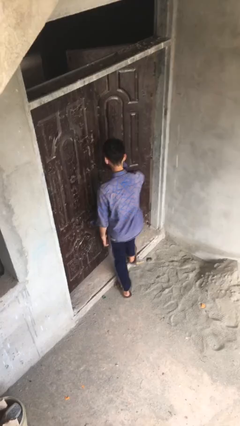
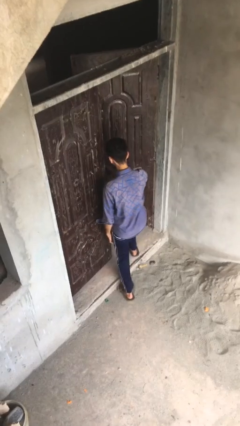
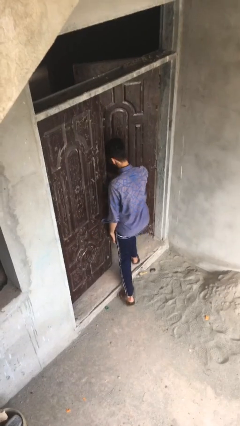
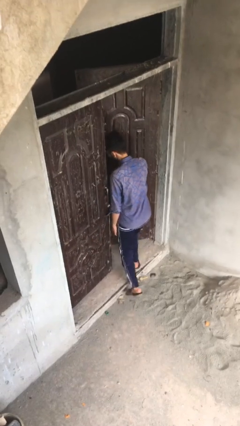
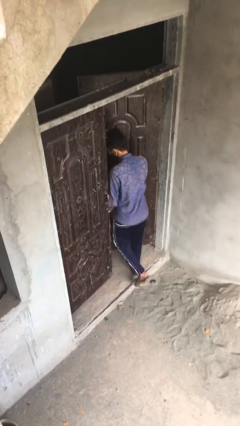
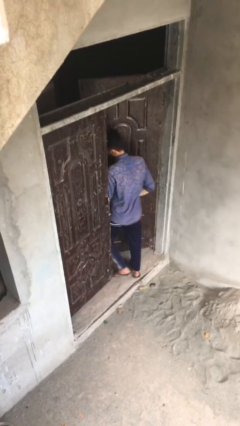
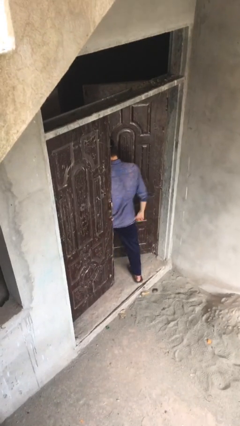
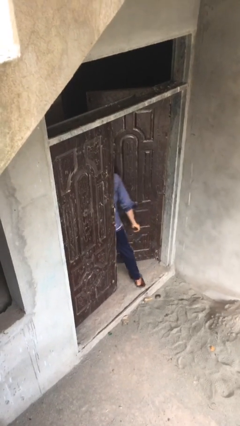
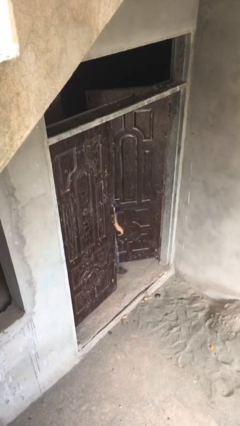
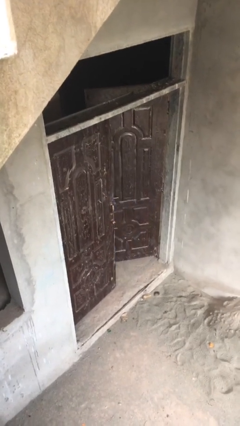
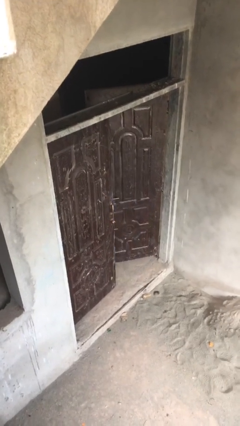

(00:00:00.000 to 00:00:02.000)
person exits scene through structure

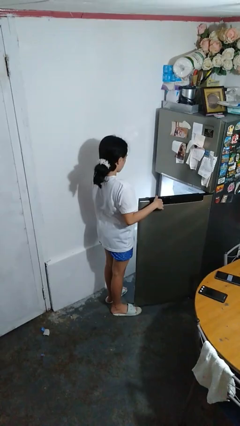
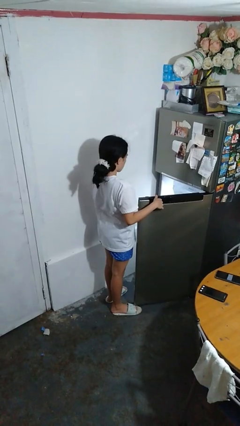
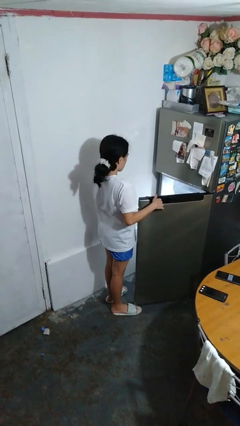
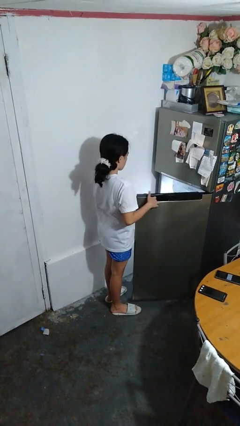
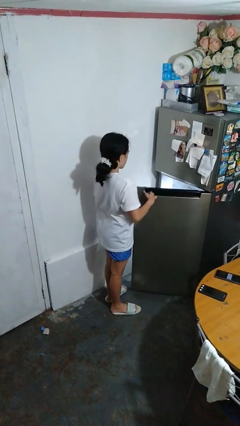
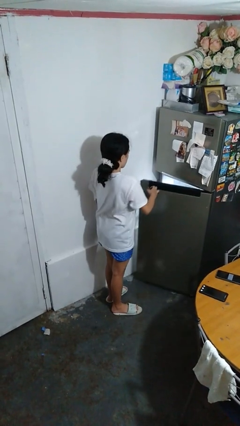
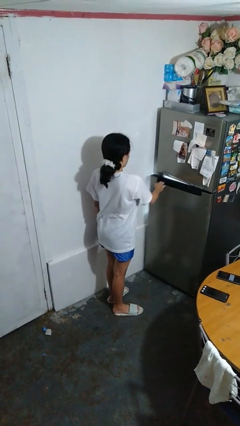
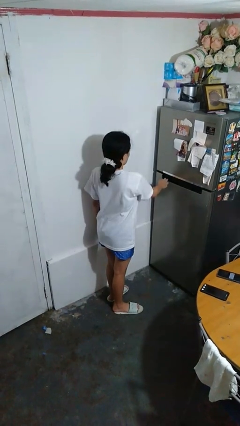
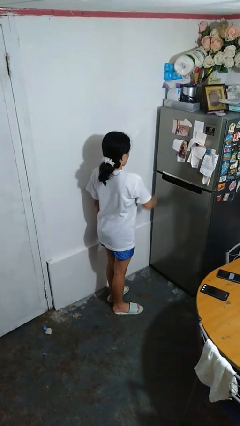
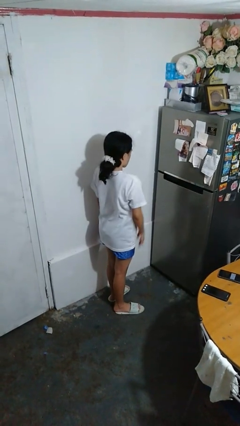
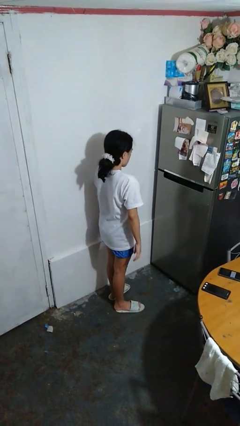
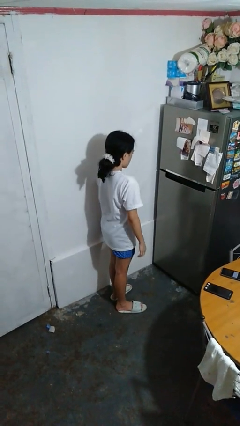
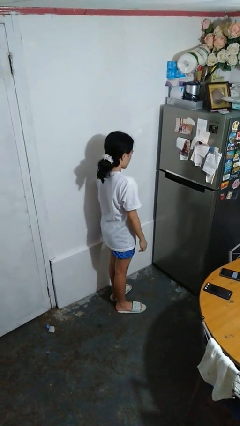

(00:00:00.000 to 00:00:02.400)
person closes refrigerator

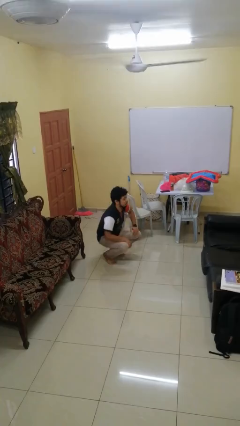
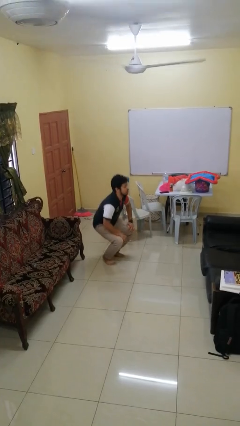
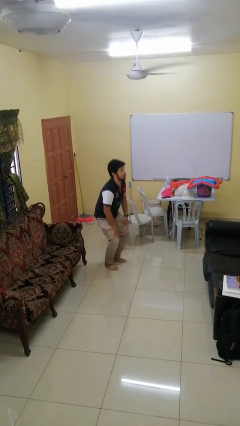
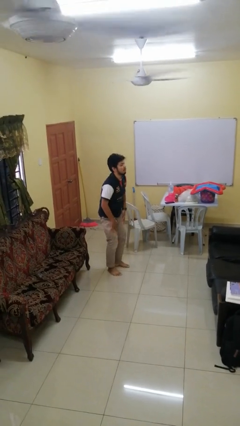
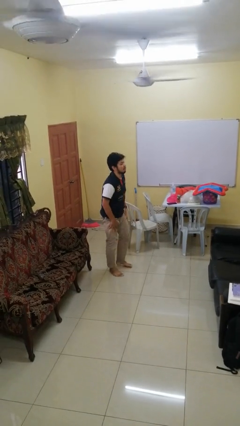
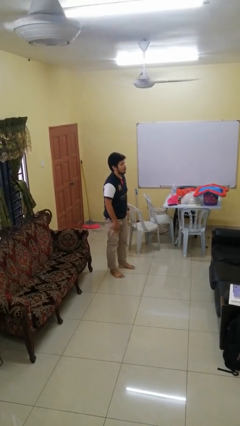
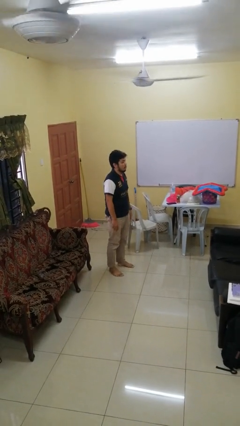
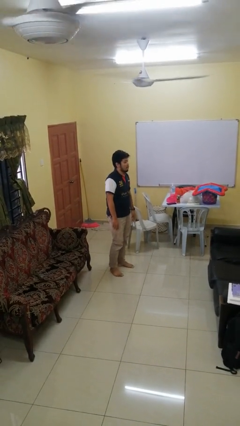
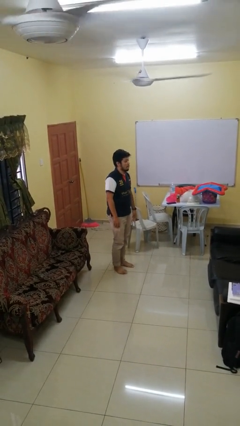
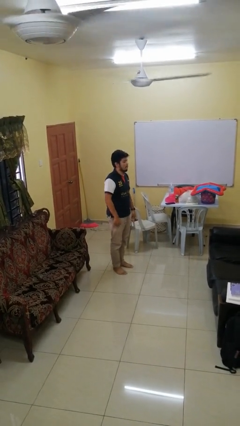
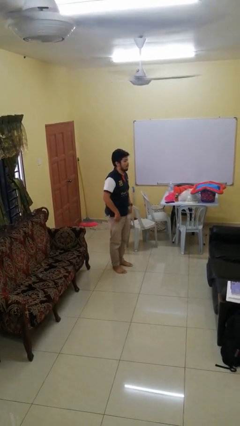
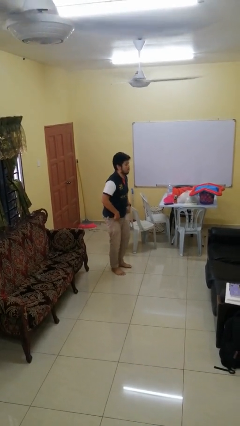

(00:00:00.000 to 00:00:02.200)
person stands up

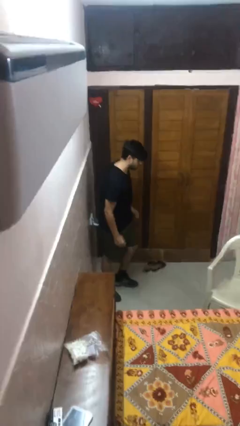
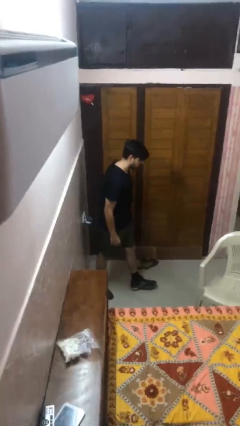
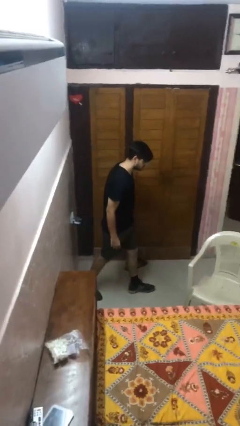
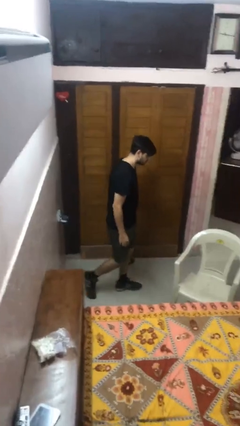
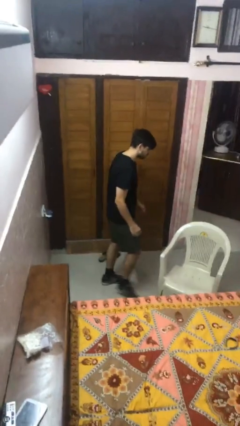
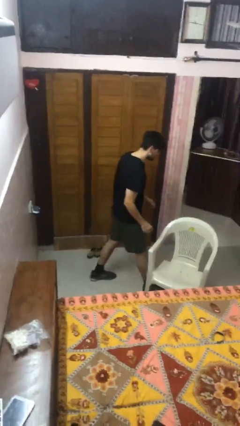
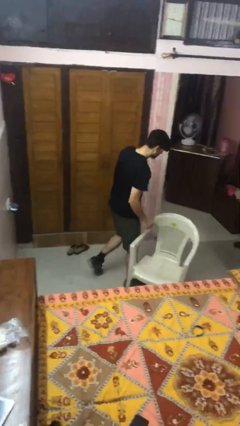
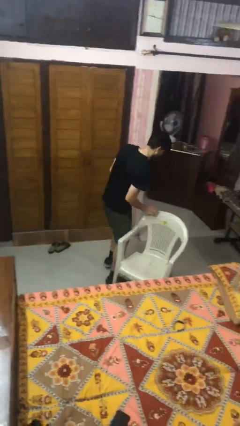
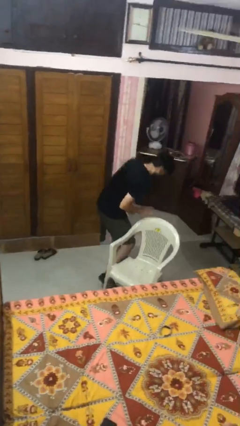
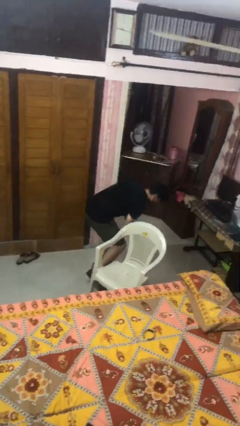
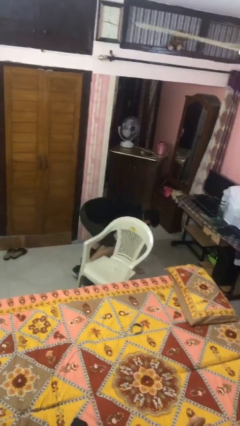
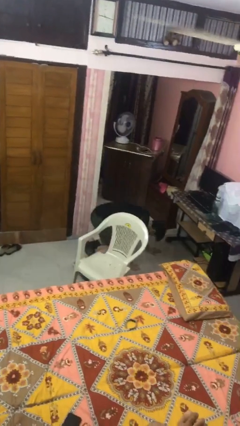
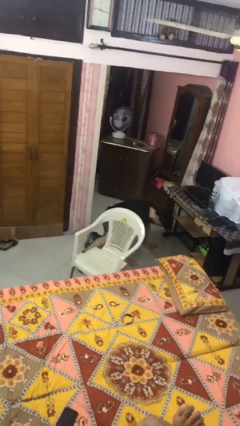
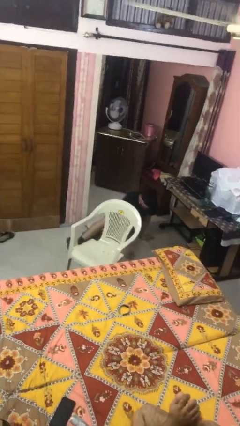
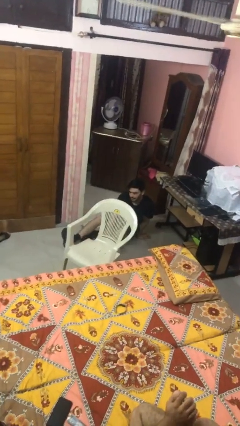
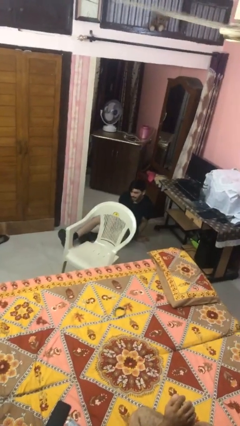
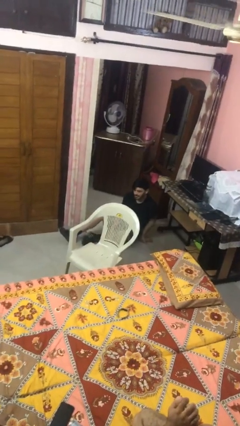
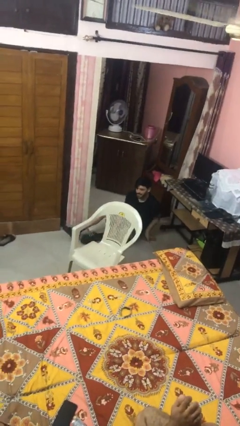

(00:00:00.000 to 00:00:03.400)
person trips on object on floor

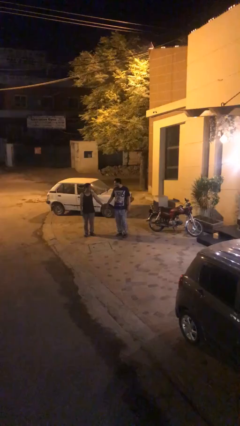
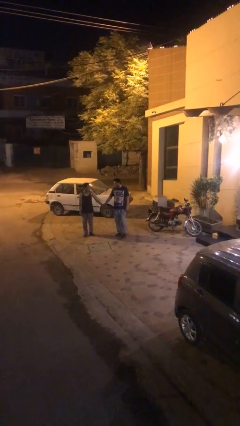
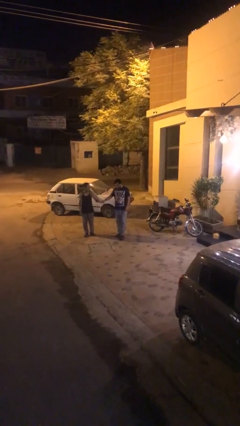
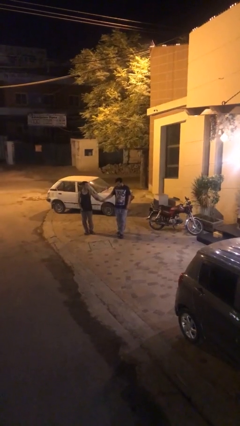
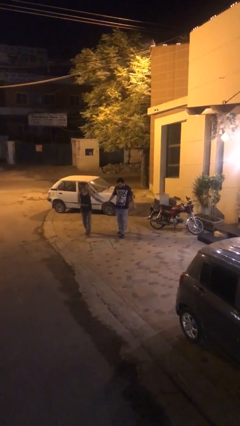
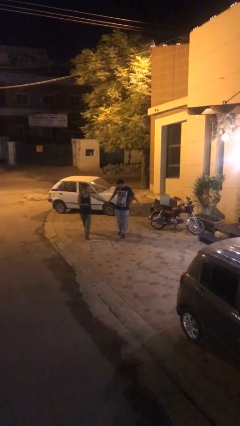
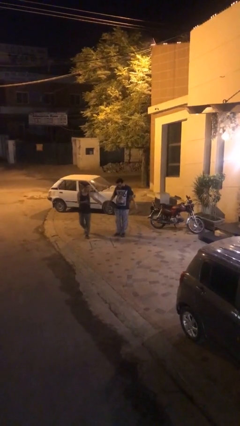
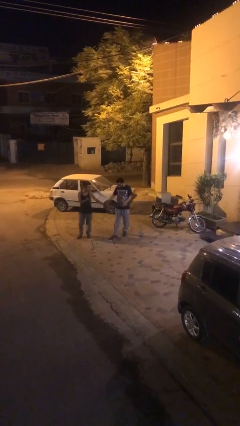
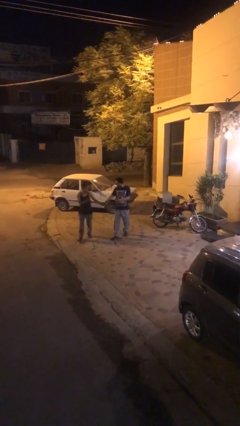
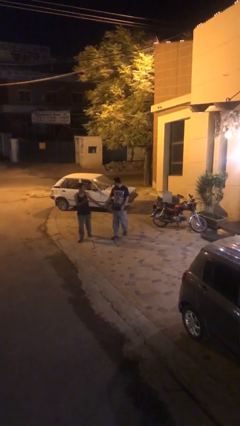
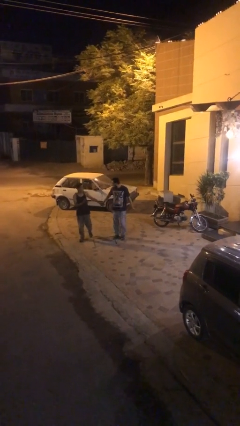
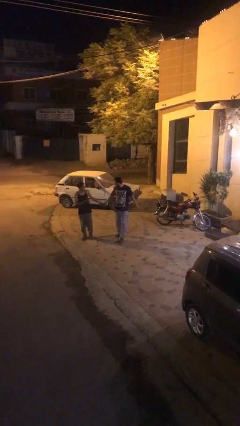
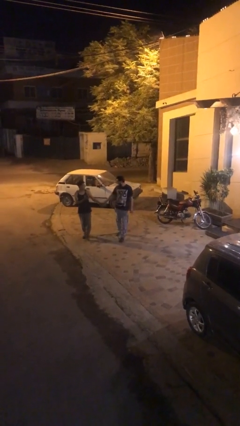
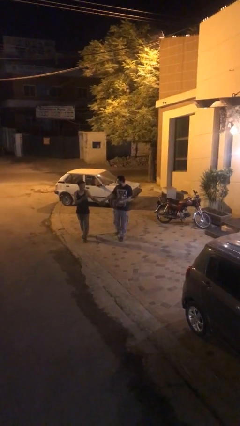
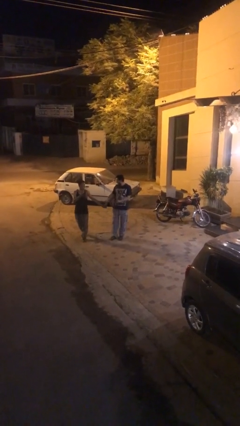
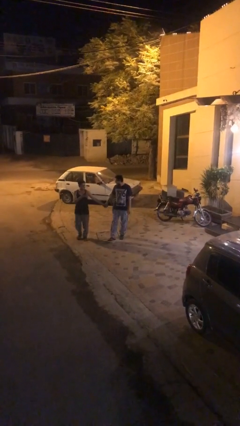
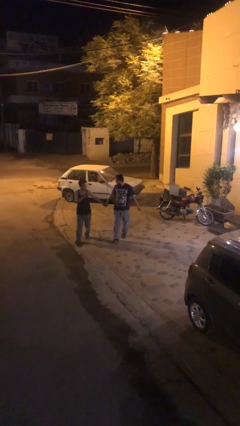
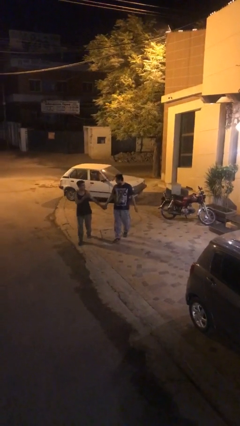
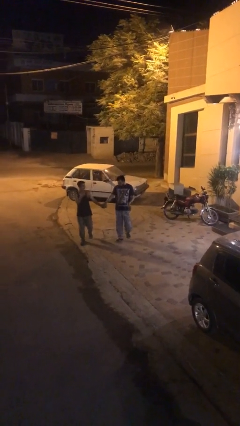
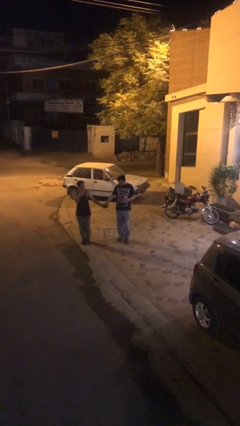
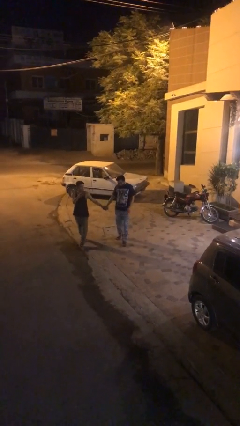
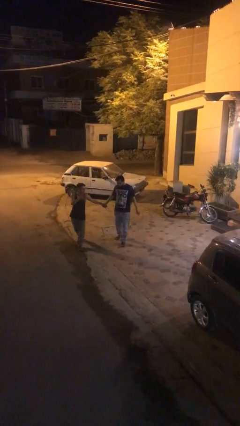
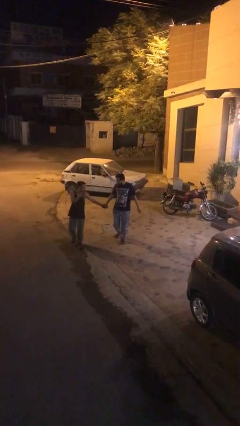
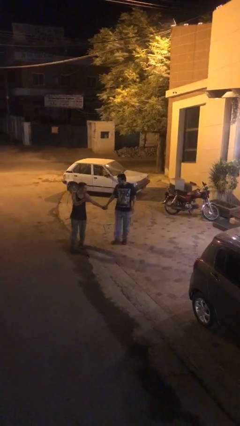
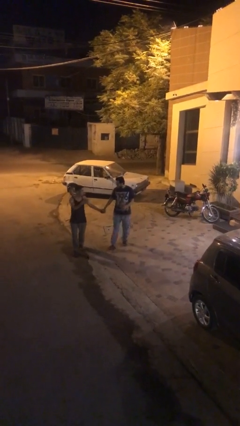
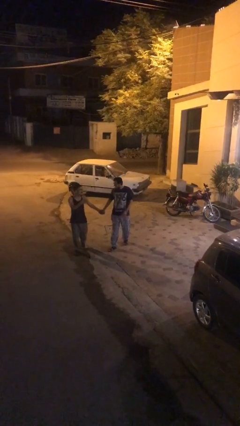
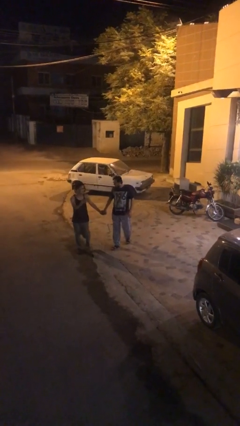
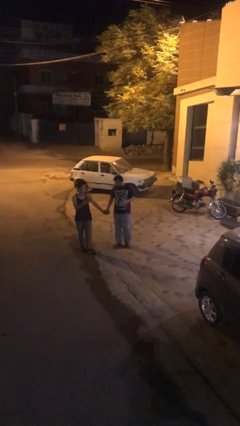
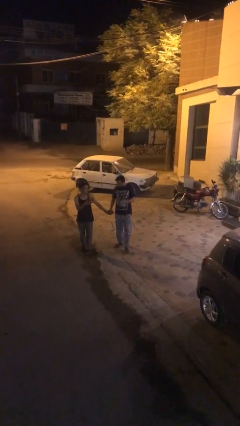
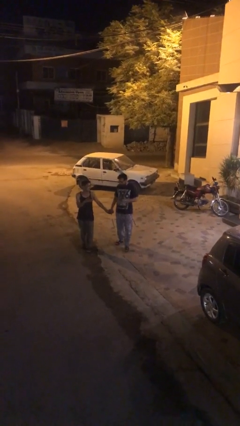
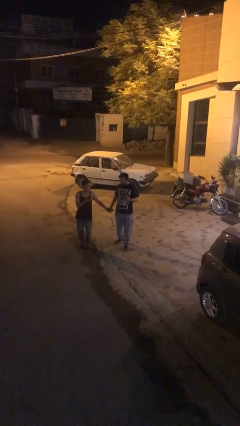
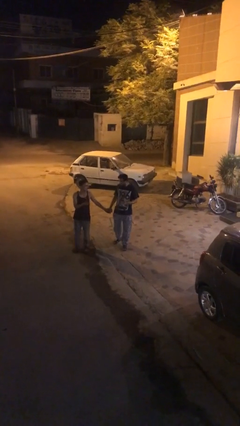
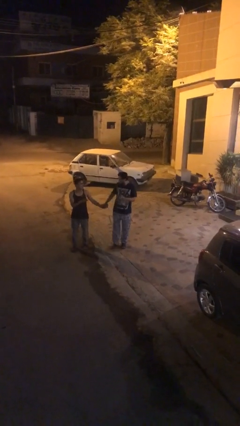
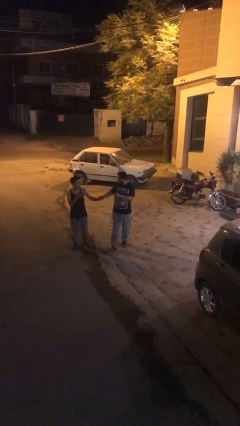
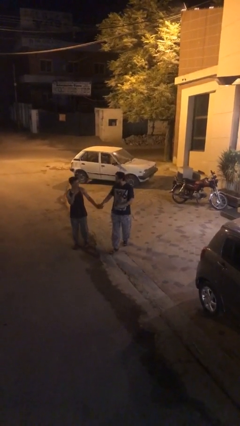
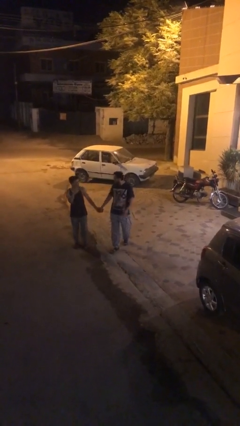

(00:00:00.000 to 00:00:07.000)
person holds hand

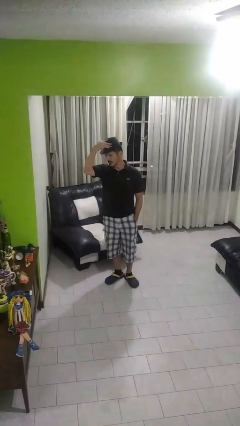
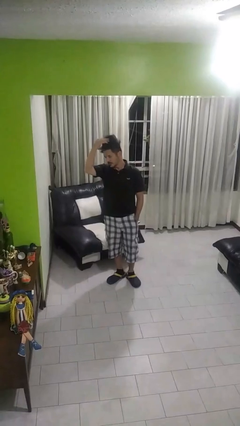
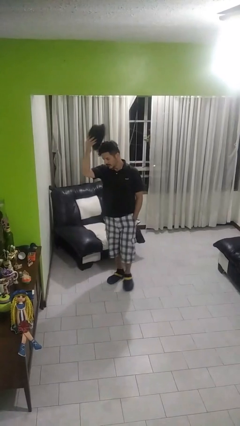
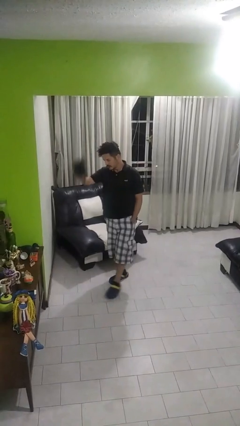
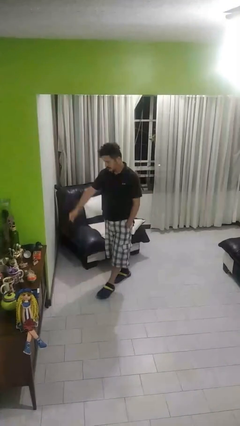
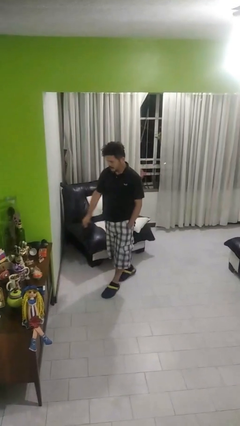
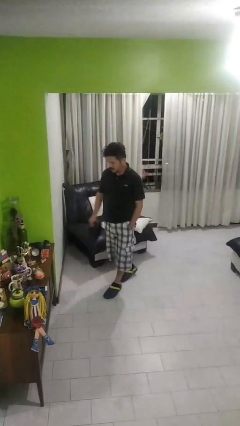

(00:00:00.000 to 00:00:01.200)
person takes off hat
